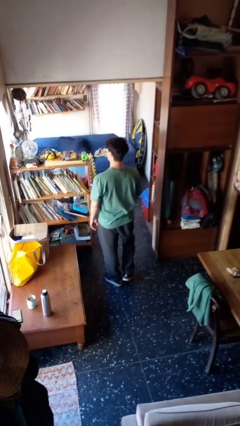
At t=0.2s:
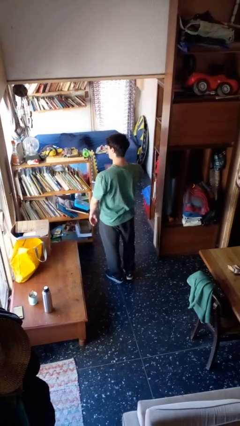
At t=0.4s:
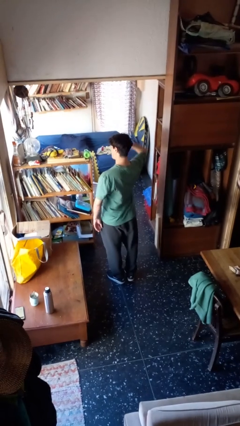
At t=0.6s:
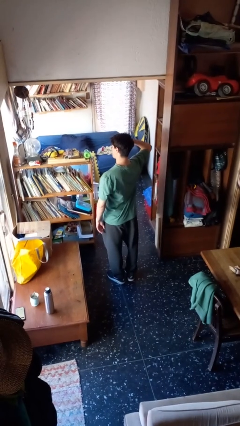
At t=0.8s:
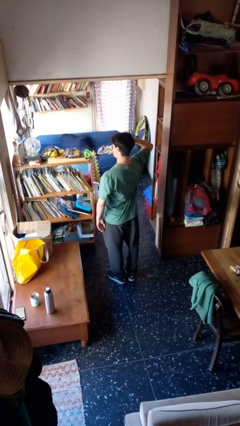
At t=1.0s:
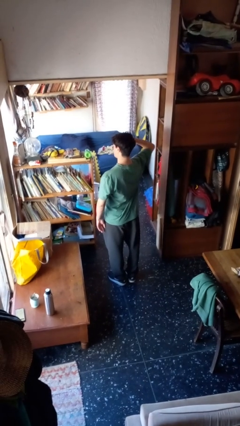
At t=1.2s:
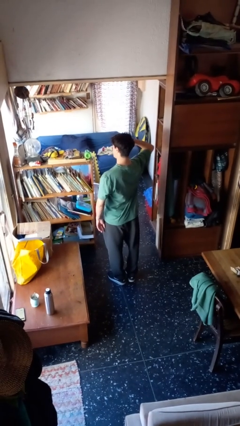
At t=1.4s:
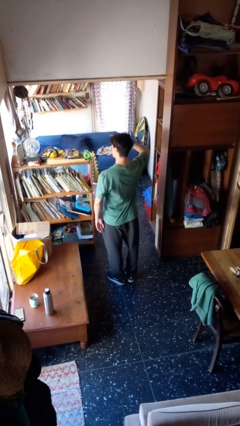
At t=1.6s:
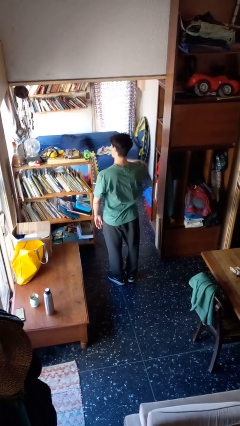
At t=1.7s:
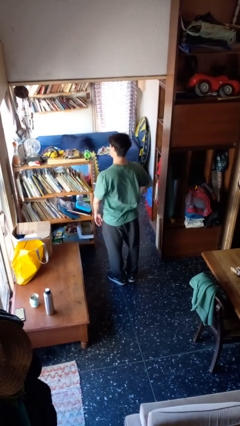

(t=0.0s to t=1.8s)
person salutes

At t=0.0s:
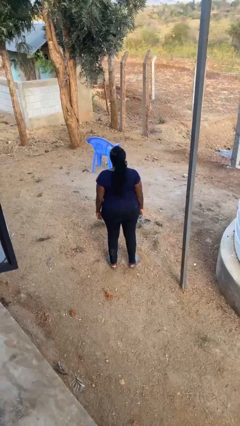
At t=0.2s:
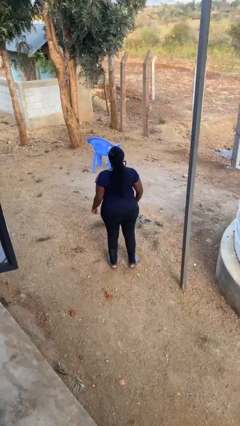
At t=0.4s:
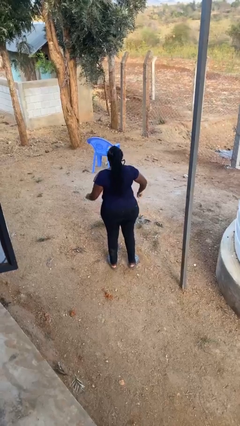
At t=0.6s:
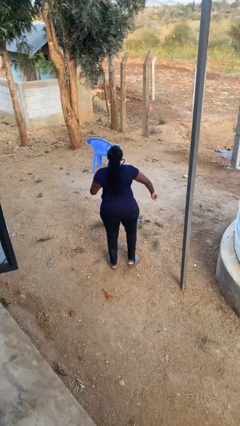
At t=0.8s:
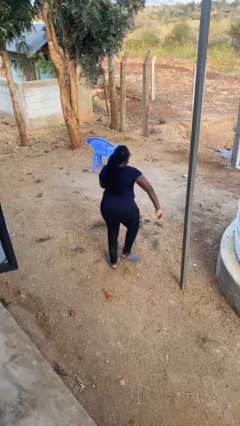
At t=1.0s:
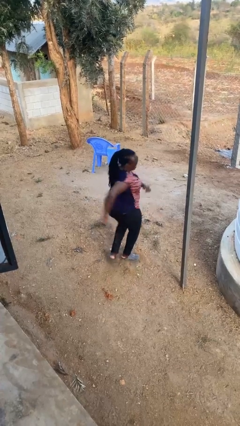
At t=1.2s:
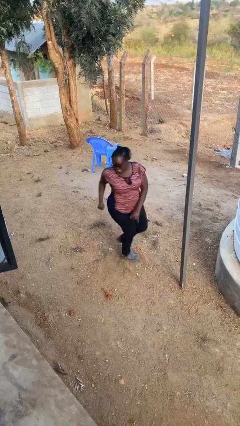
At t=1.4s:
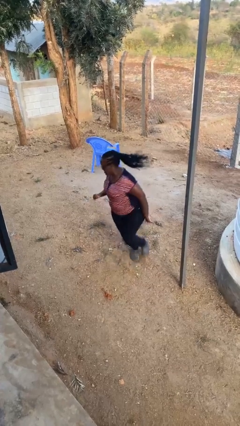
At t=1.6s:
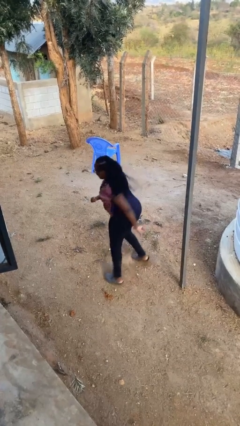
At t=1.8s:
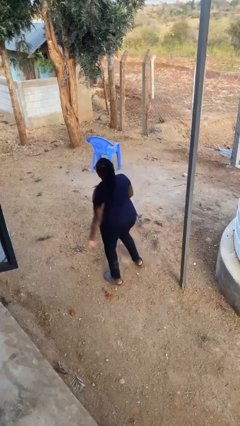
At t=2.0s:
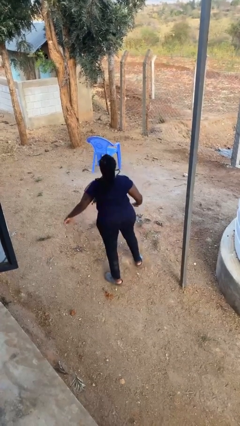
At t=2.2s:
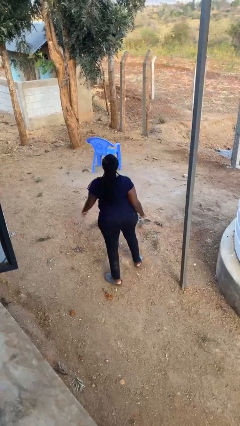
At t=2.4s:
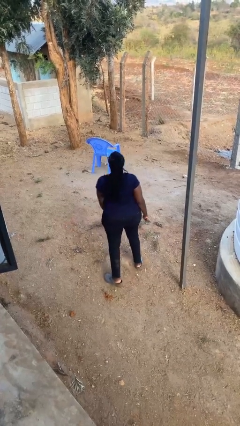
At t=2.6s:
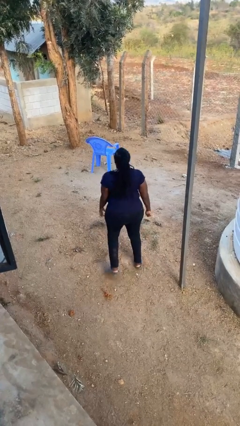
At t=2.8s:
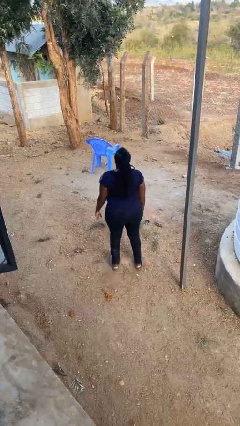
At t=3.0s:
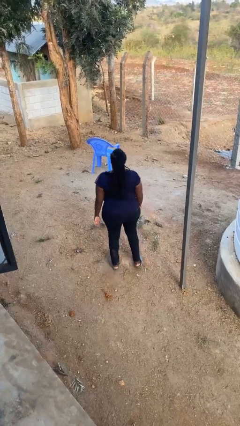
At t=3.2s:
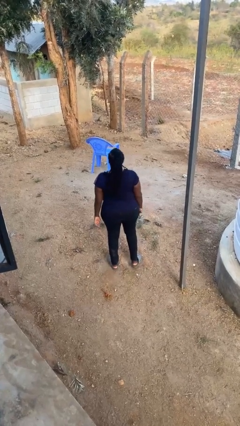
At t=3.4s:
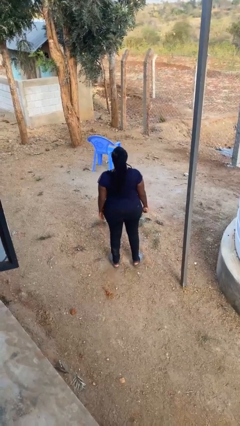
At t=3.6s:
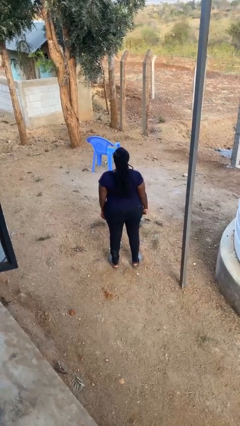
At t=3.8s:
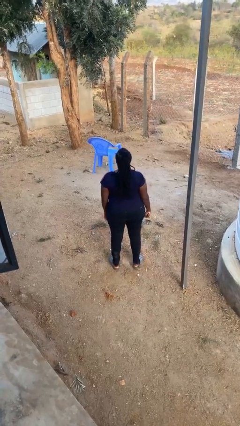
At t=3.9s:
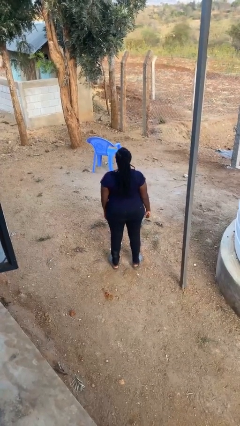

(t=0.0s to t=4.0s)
person twirls

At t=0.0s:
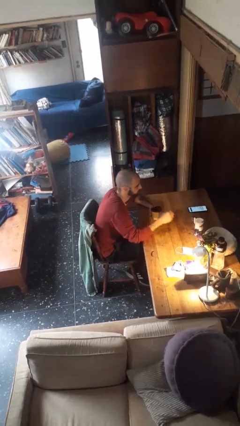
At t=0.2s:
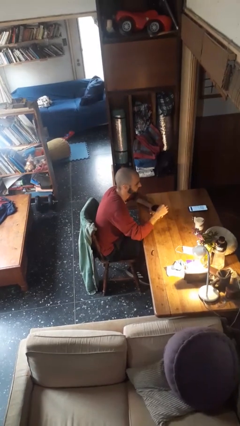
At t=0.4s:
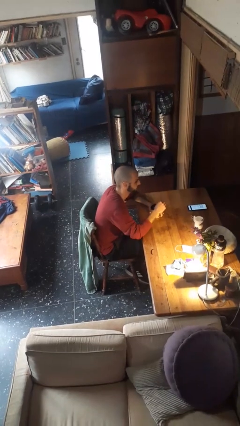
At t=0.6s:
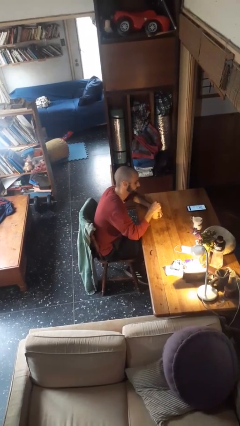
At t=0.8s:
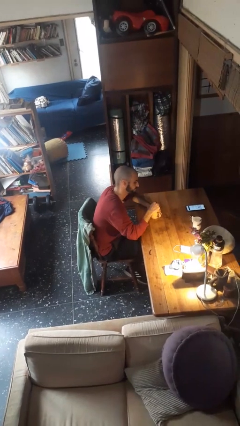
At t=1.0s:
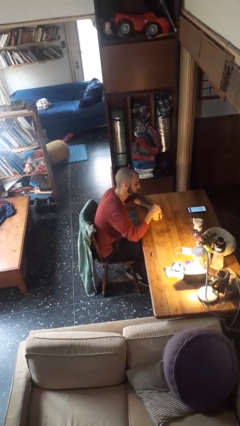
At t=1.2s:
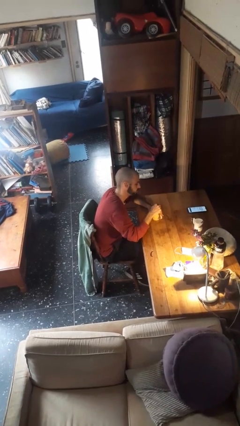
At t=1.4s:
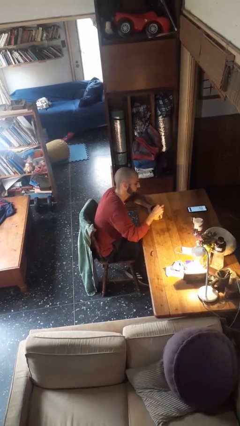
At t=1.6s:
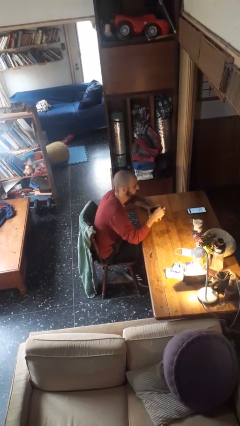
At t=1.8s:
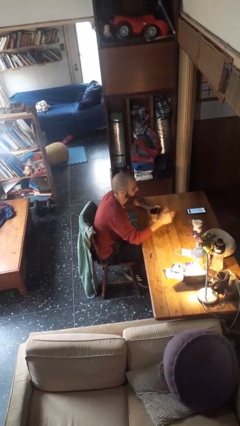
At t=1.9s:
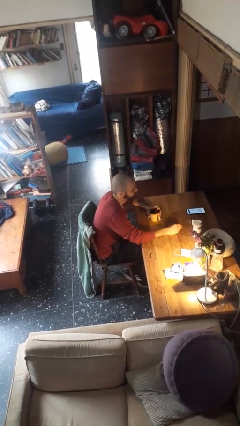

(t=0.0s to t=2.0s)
person stirs mug

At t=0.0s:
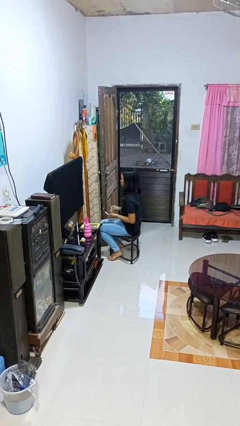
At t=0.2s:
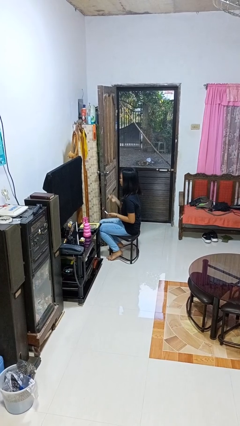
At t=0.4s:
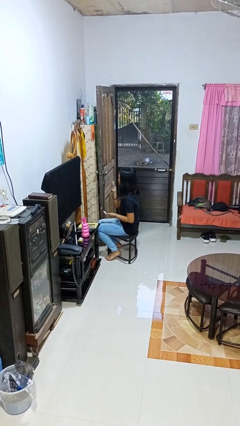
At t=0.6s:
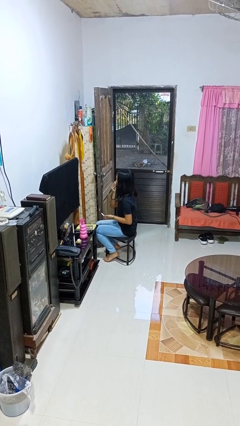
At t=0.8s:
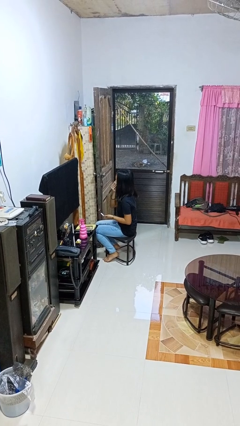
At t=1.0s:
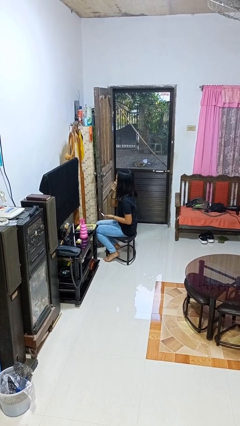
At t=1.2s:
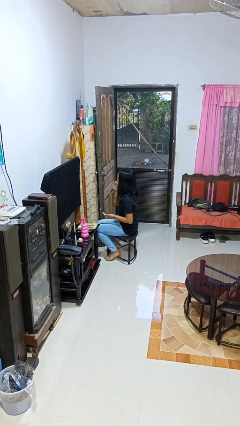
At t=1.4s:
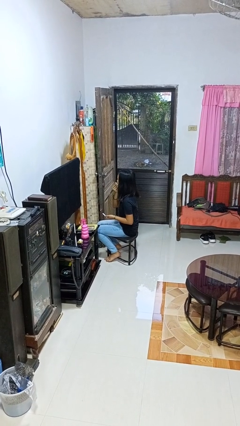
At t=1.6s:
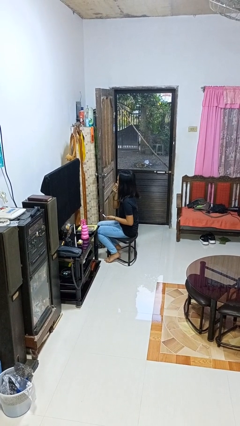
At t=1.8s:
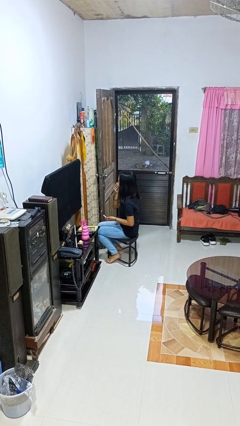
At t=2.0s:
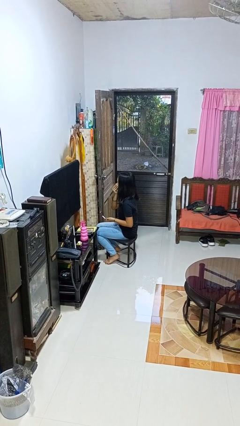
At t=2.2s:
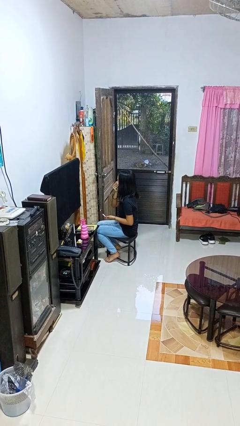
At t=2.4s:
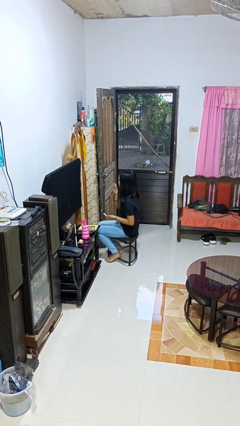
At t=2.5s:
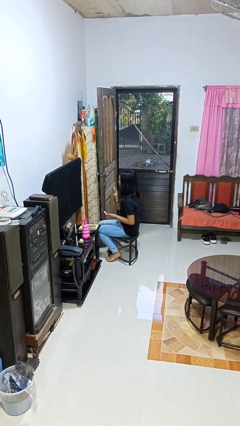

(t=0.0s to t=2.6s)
person applies foundation makeup

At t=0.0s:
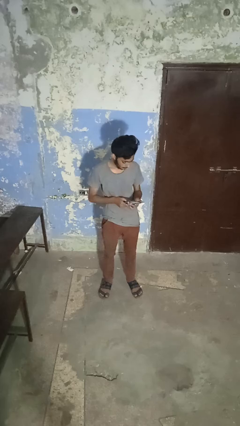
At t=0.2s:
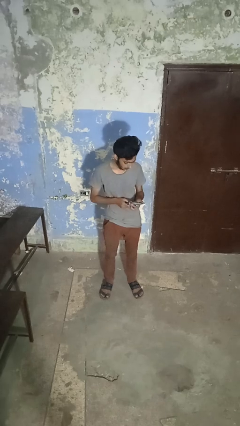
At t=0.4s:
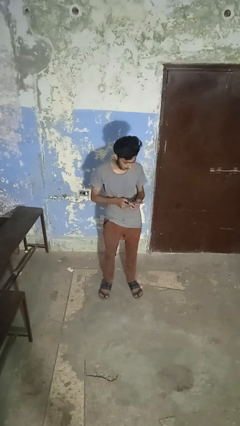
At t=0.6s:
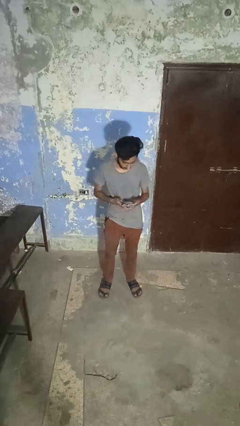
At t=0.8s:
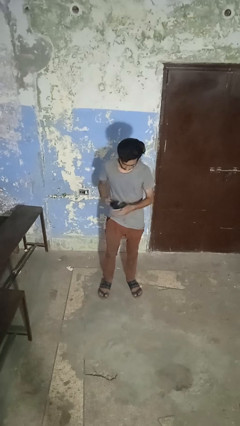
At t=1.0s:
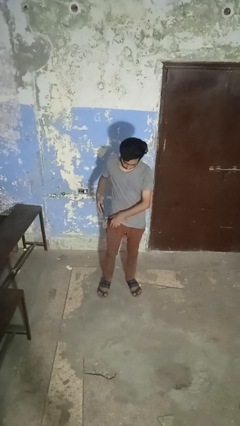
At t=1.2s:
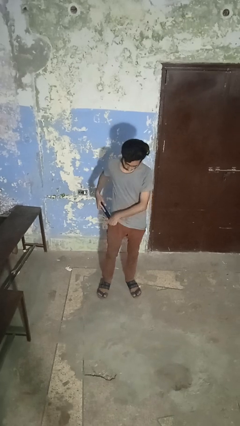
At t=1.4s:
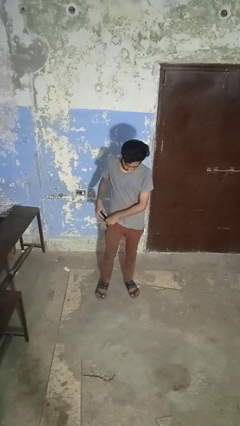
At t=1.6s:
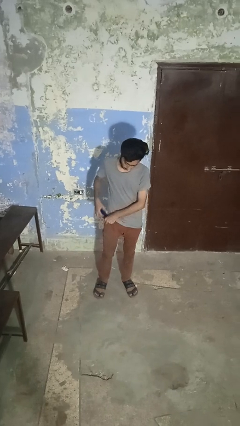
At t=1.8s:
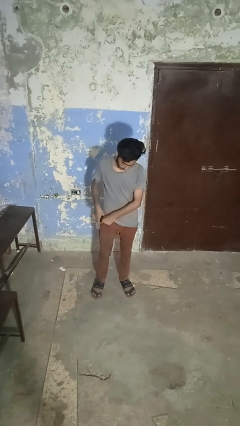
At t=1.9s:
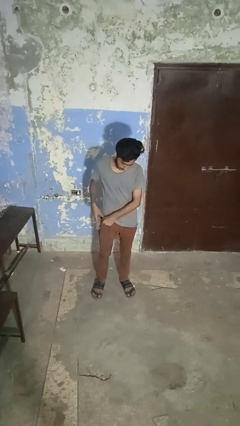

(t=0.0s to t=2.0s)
person puts phone into pocket

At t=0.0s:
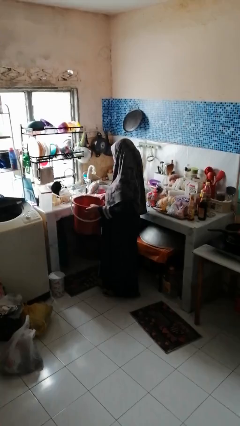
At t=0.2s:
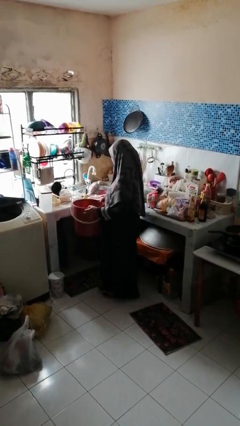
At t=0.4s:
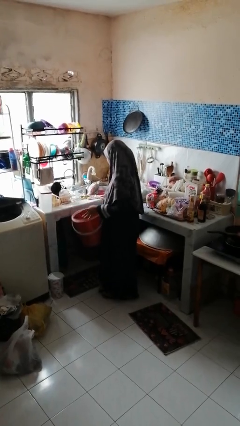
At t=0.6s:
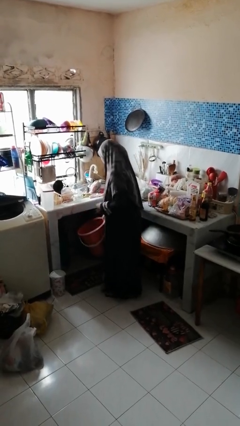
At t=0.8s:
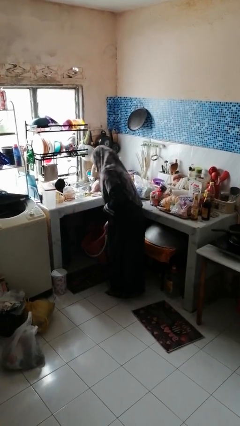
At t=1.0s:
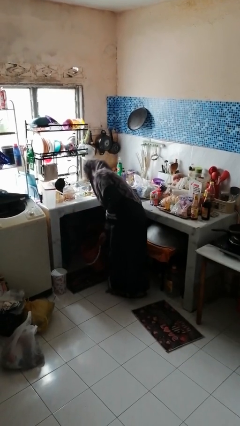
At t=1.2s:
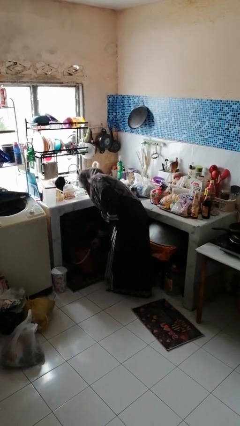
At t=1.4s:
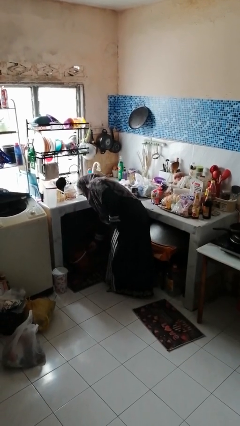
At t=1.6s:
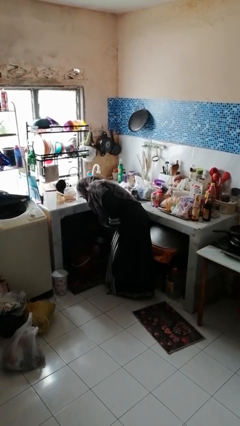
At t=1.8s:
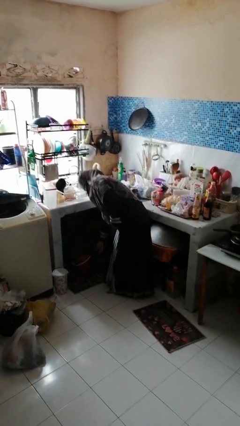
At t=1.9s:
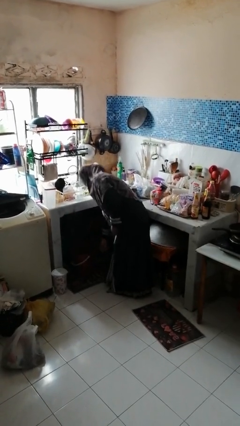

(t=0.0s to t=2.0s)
person puts down object into cabinet

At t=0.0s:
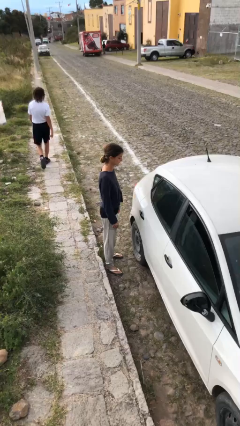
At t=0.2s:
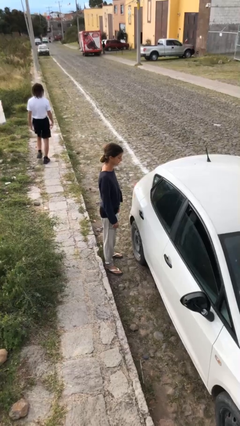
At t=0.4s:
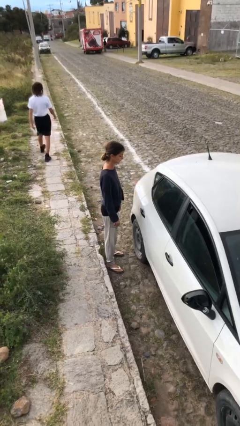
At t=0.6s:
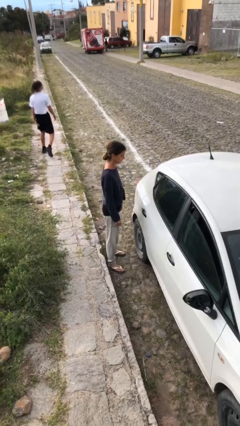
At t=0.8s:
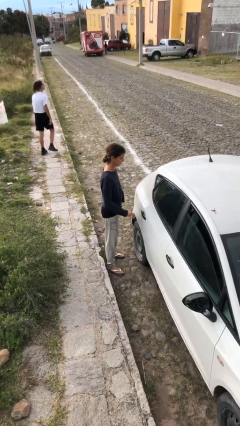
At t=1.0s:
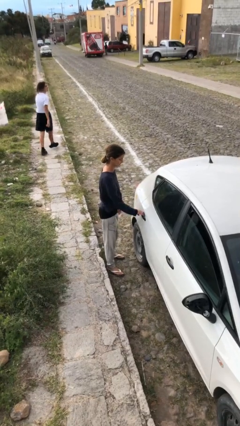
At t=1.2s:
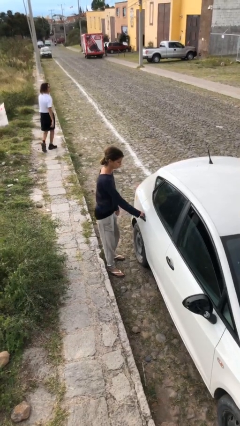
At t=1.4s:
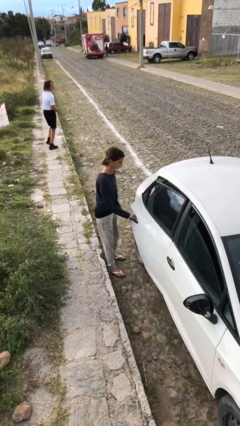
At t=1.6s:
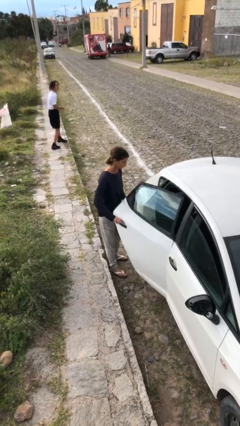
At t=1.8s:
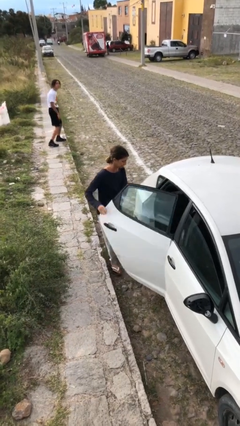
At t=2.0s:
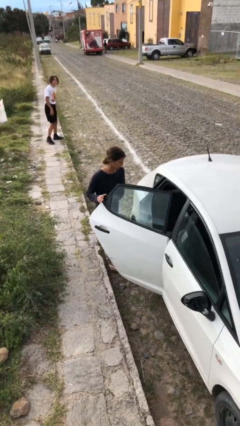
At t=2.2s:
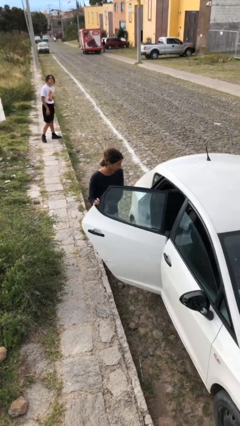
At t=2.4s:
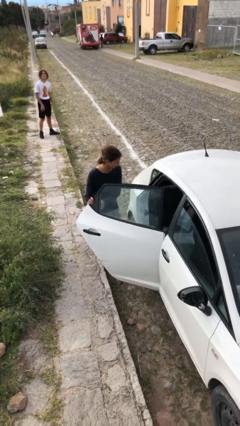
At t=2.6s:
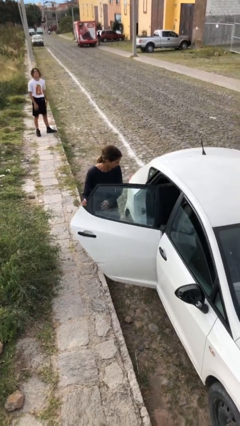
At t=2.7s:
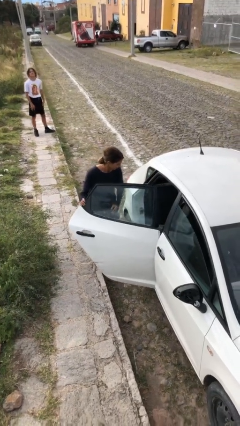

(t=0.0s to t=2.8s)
person opens car door
